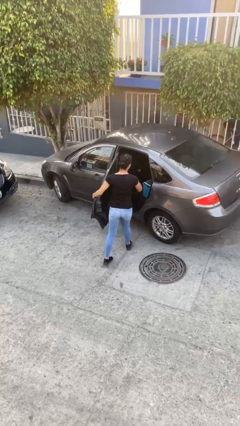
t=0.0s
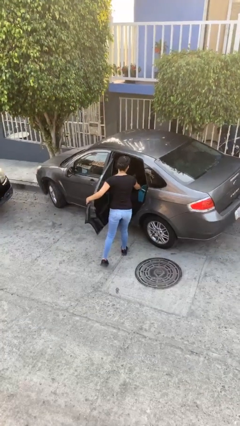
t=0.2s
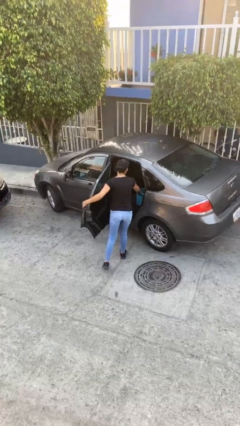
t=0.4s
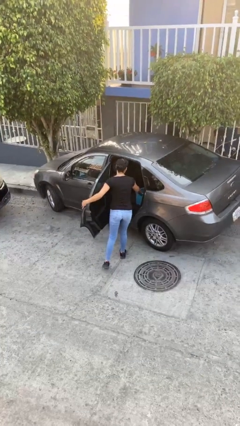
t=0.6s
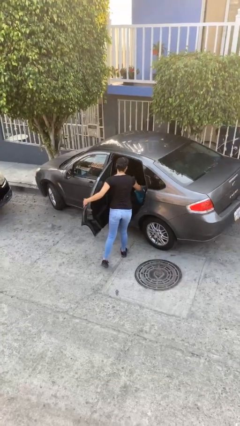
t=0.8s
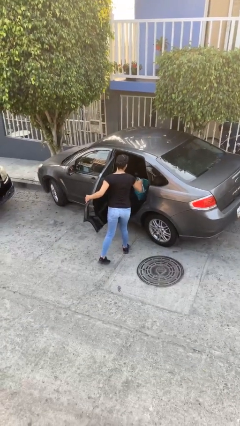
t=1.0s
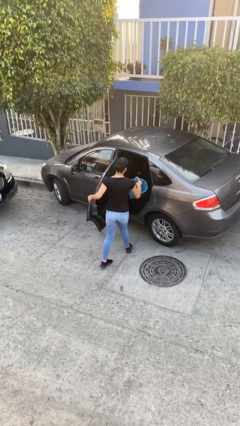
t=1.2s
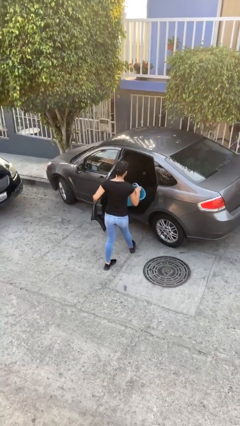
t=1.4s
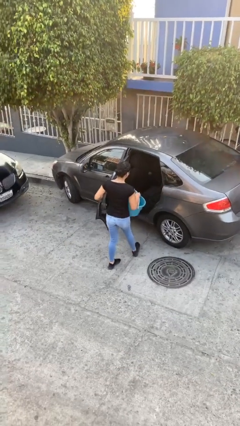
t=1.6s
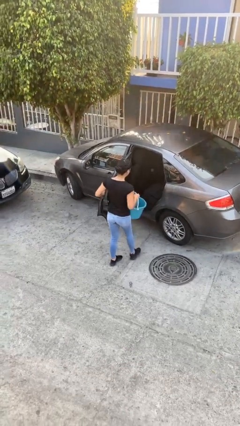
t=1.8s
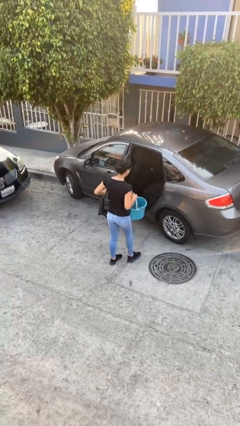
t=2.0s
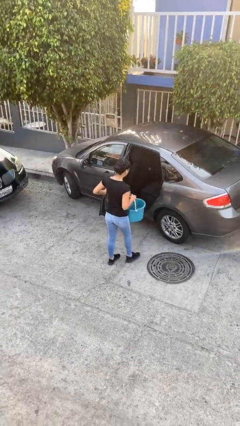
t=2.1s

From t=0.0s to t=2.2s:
person unloads car

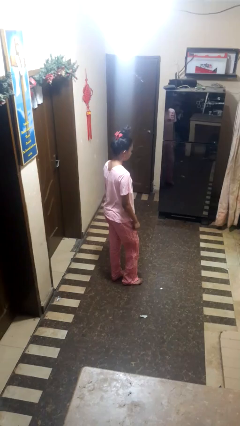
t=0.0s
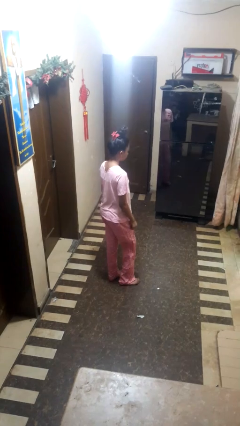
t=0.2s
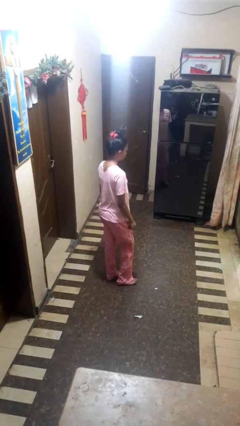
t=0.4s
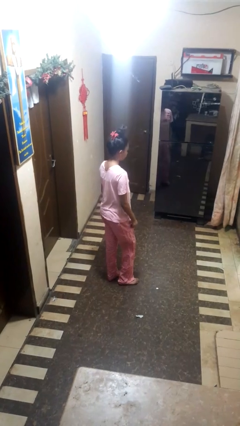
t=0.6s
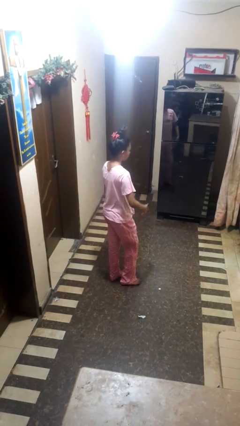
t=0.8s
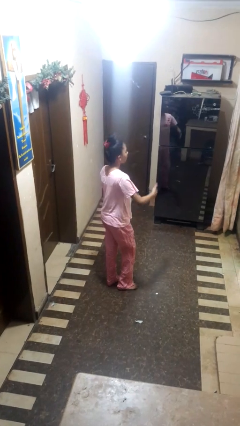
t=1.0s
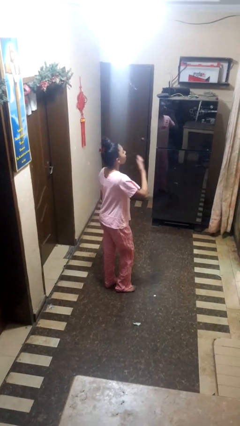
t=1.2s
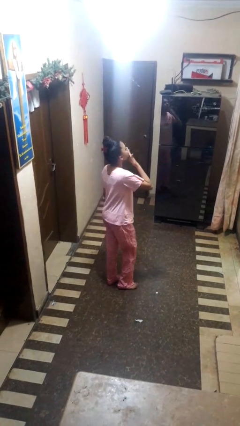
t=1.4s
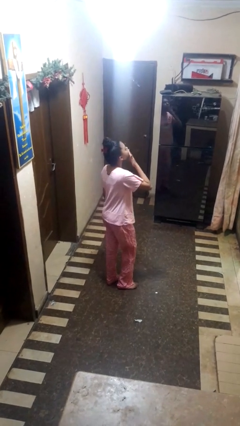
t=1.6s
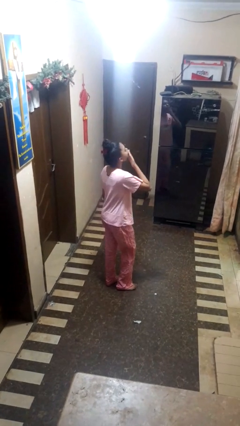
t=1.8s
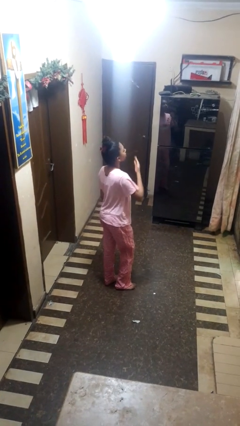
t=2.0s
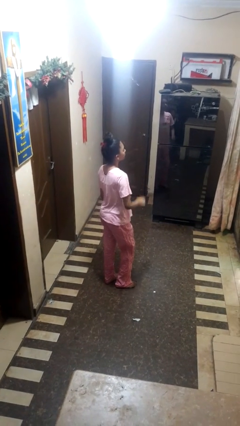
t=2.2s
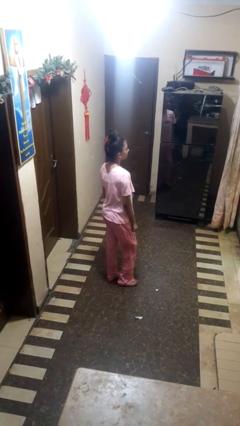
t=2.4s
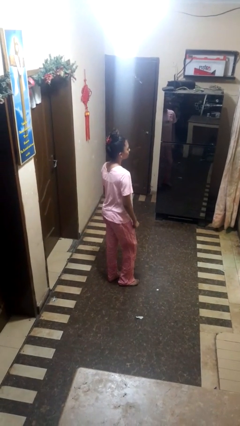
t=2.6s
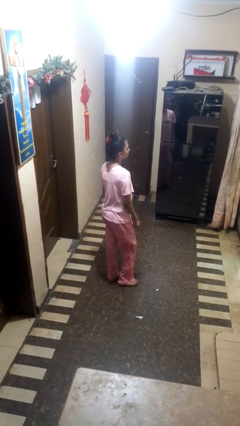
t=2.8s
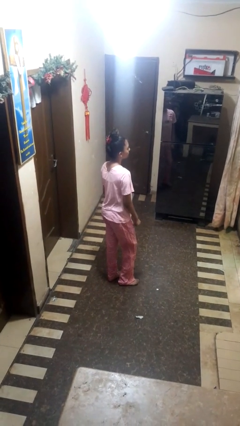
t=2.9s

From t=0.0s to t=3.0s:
person yawns

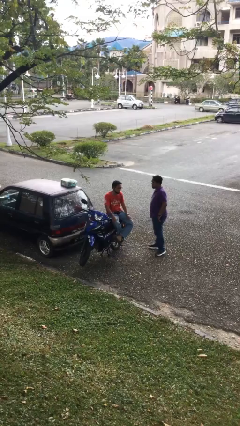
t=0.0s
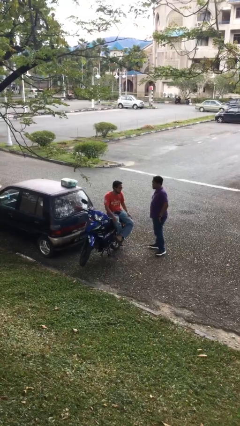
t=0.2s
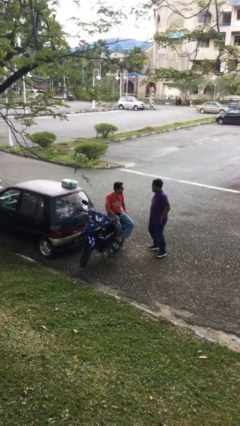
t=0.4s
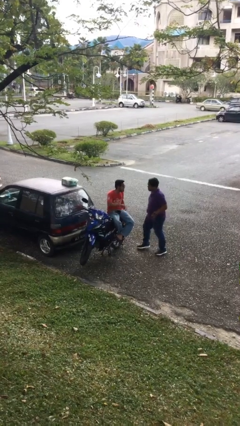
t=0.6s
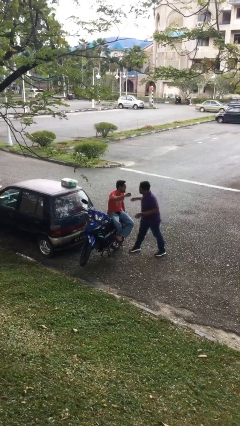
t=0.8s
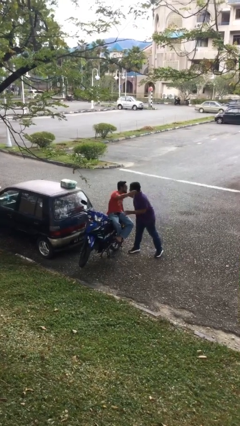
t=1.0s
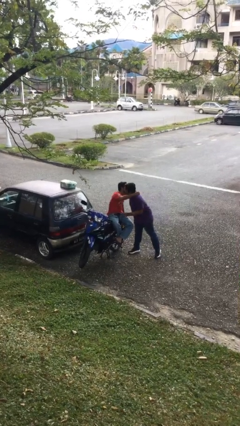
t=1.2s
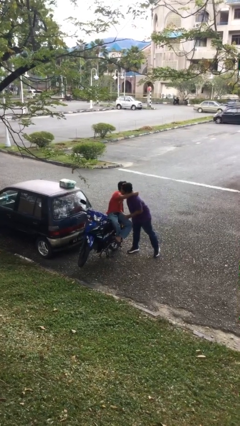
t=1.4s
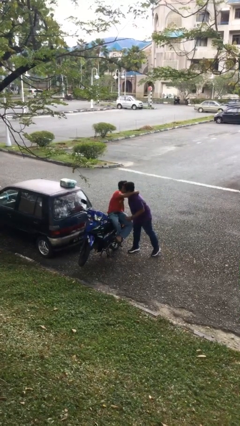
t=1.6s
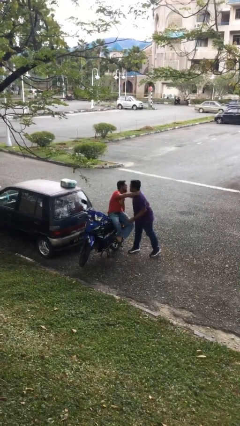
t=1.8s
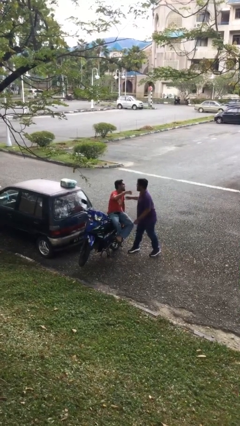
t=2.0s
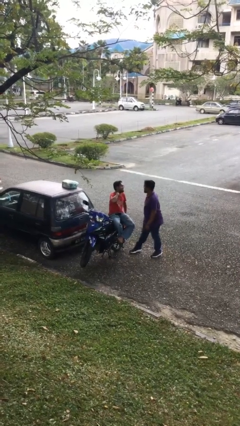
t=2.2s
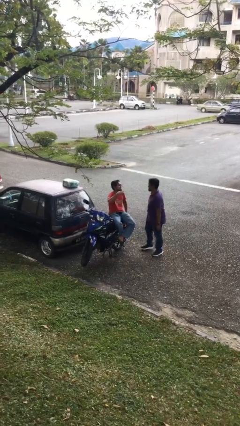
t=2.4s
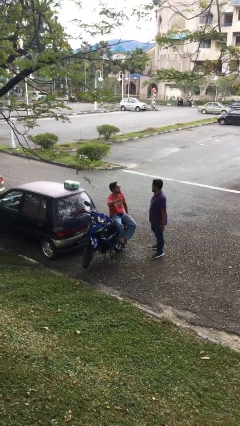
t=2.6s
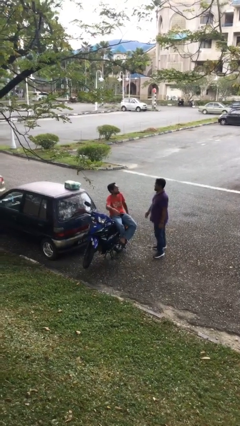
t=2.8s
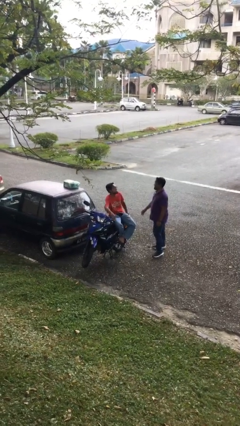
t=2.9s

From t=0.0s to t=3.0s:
person embraces person

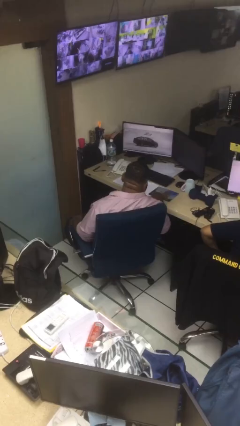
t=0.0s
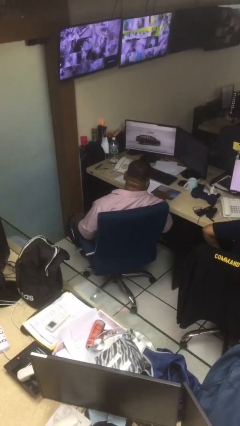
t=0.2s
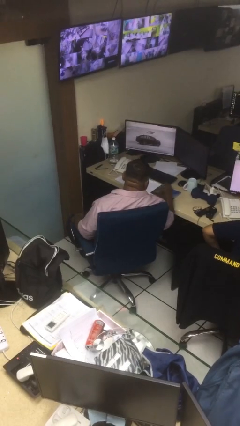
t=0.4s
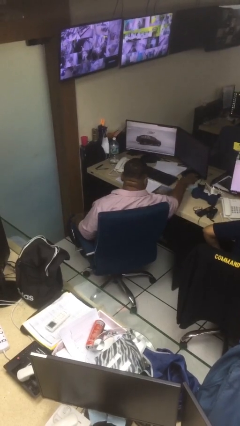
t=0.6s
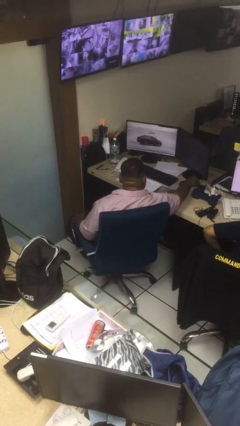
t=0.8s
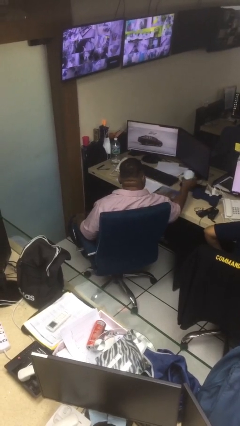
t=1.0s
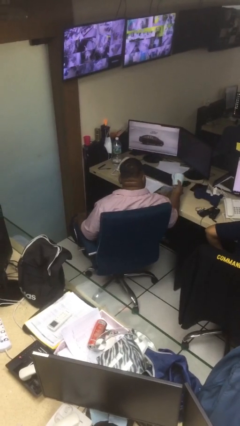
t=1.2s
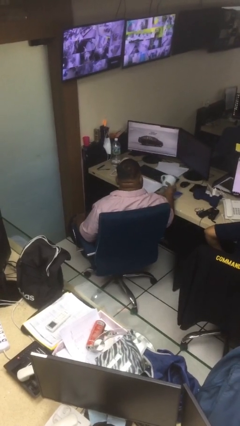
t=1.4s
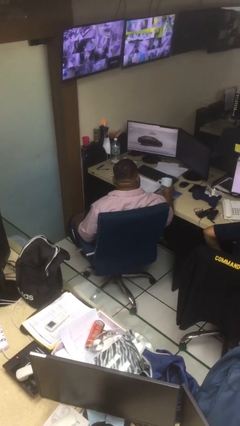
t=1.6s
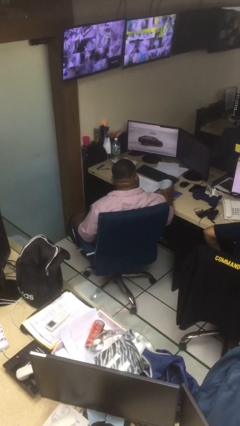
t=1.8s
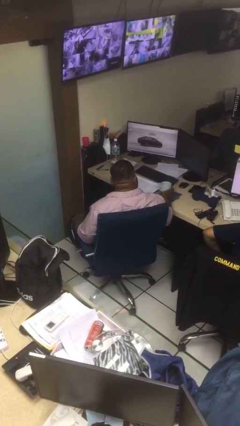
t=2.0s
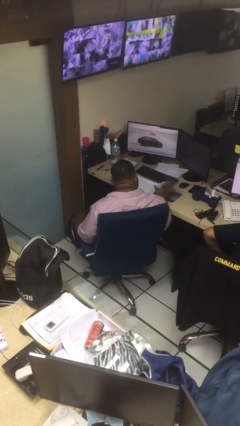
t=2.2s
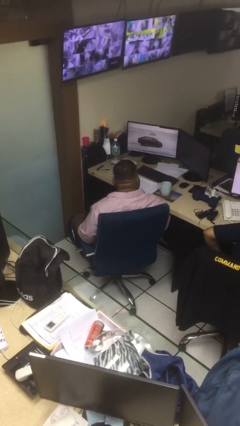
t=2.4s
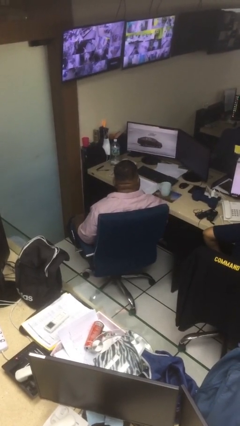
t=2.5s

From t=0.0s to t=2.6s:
person sets upright glass

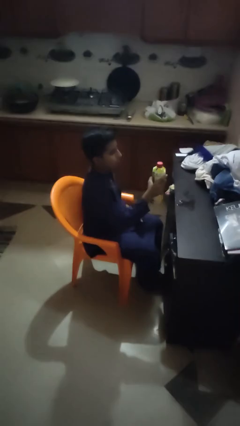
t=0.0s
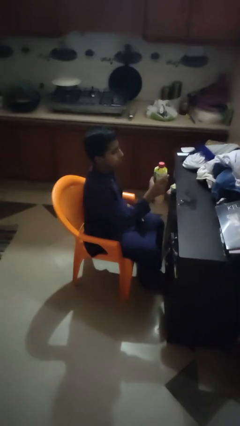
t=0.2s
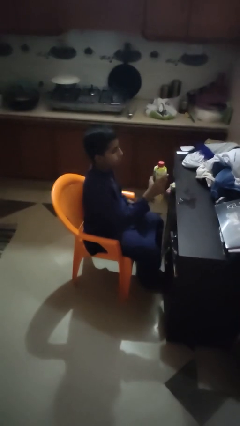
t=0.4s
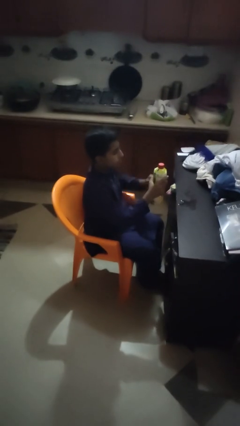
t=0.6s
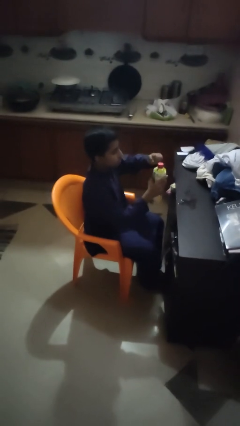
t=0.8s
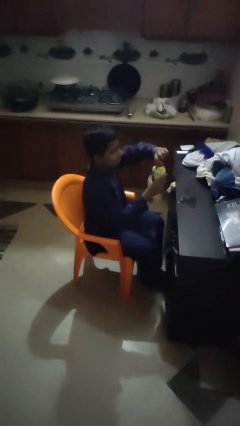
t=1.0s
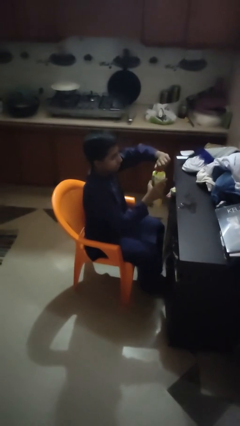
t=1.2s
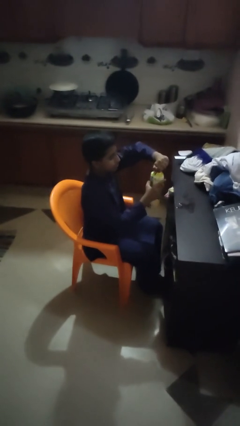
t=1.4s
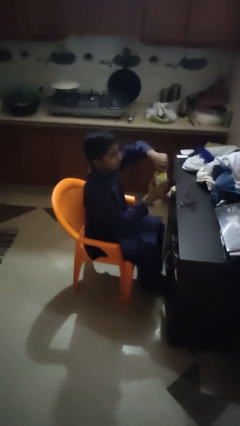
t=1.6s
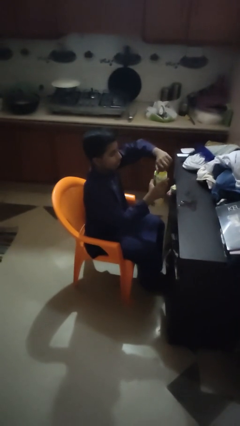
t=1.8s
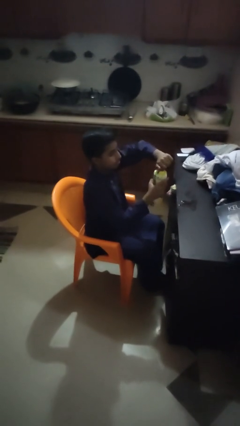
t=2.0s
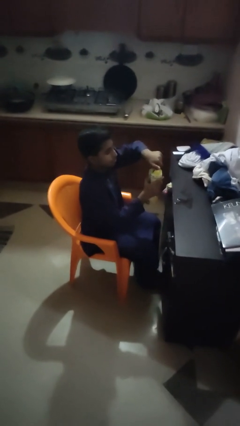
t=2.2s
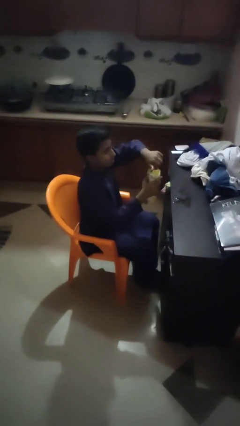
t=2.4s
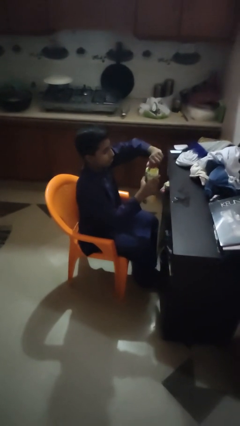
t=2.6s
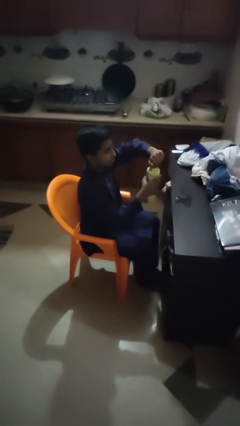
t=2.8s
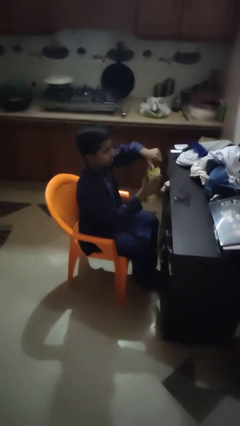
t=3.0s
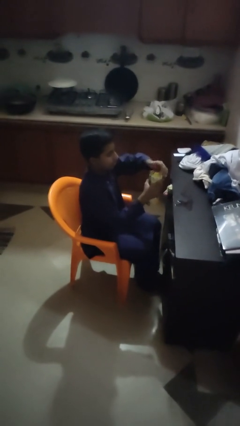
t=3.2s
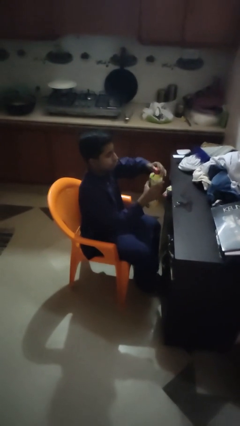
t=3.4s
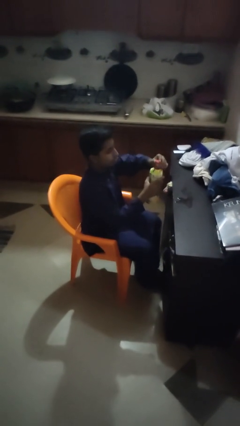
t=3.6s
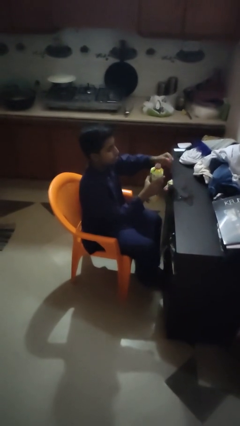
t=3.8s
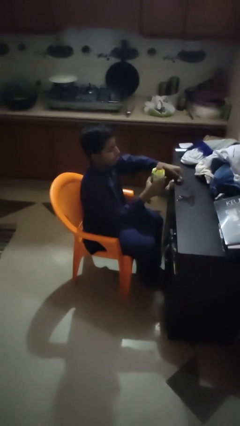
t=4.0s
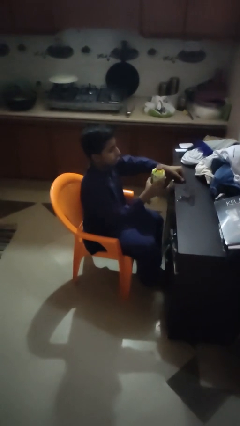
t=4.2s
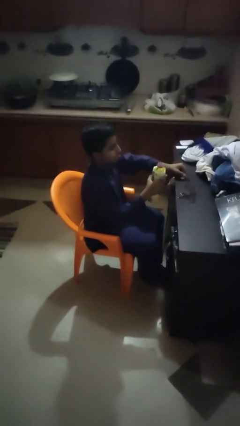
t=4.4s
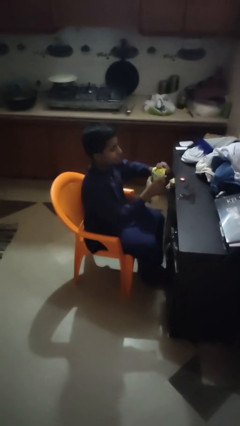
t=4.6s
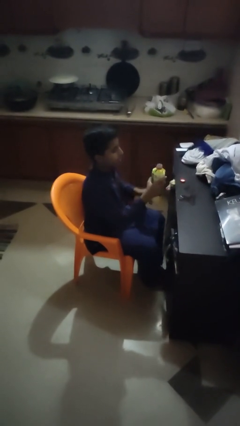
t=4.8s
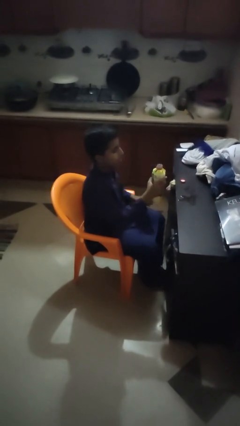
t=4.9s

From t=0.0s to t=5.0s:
person unscrews lid from bottle

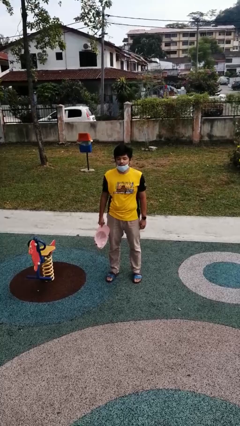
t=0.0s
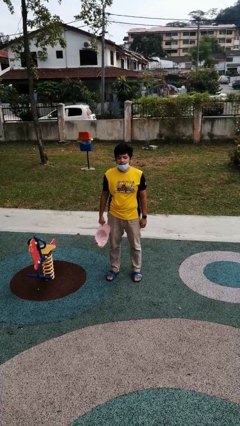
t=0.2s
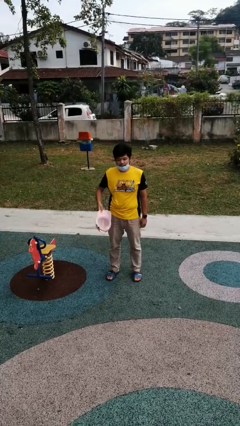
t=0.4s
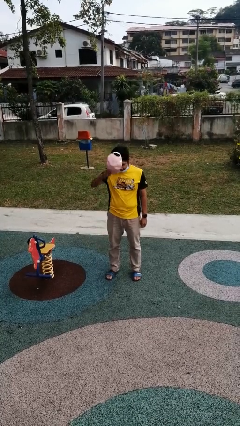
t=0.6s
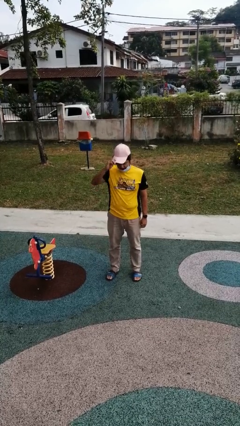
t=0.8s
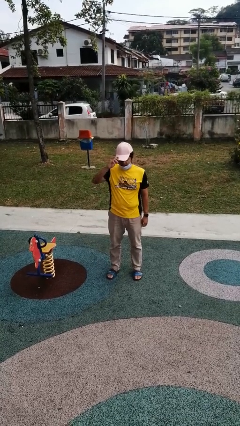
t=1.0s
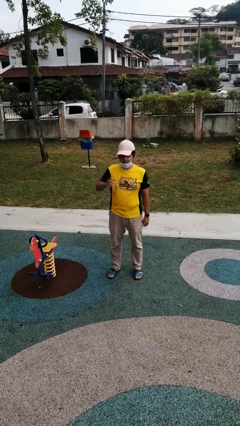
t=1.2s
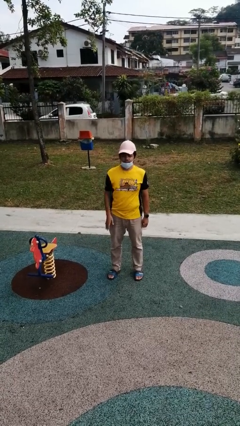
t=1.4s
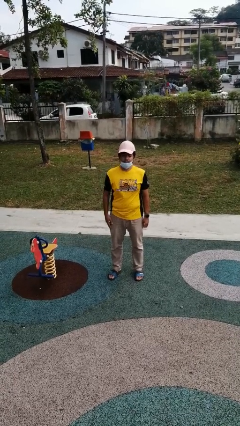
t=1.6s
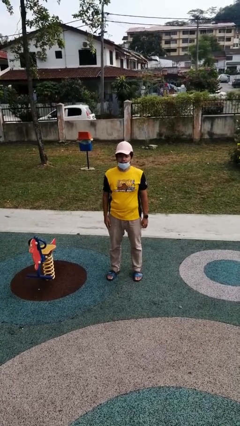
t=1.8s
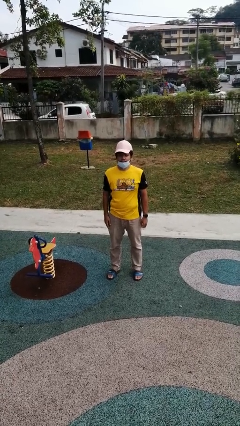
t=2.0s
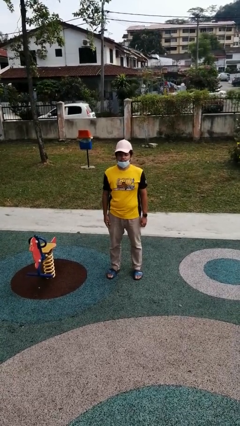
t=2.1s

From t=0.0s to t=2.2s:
person puts on hat
